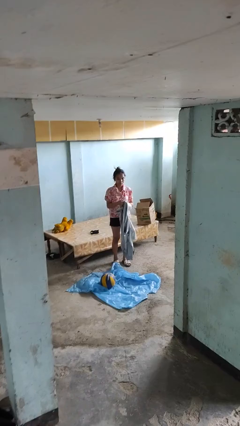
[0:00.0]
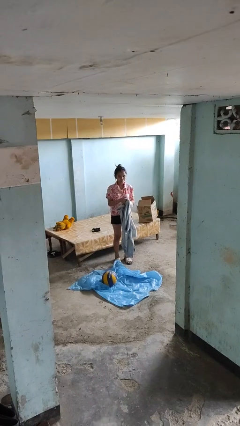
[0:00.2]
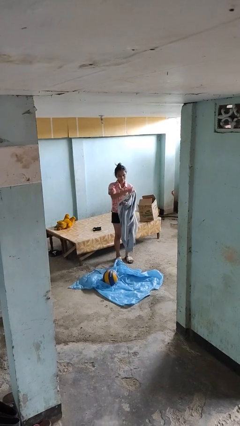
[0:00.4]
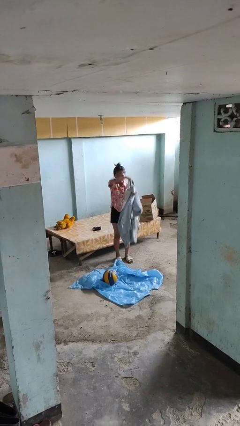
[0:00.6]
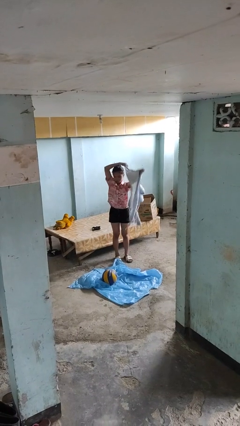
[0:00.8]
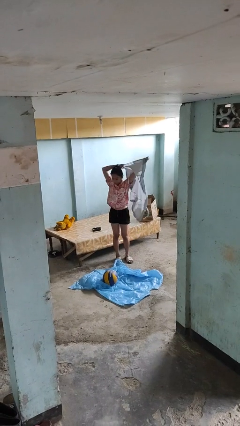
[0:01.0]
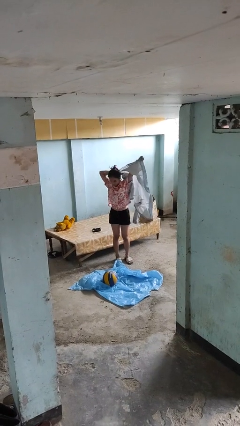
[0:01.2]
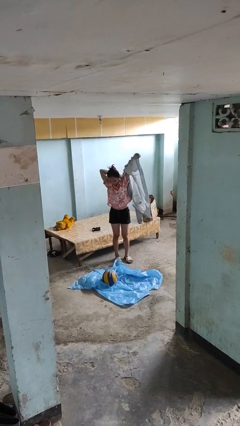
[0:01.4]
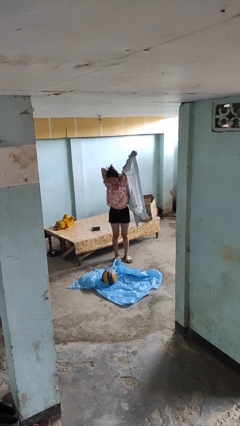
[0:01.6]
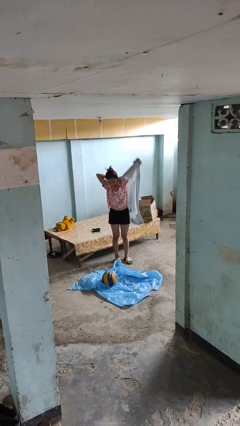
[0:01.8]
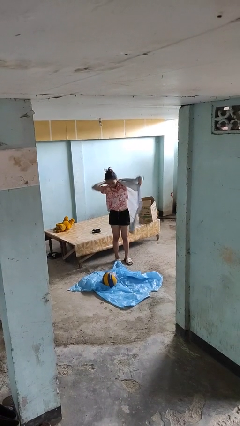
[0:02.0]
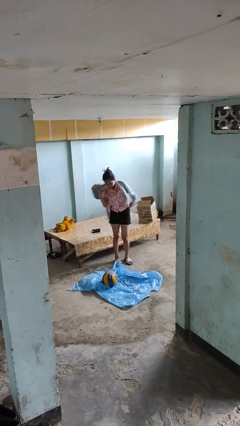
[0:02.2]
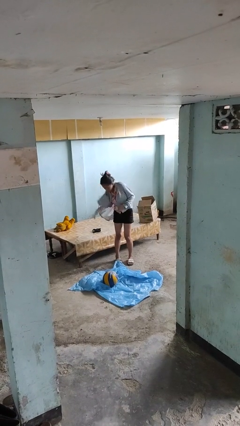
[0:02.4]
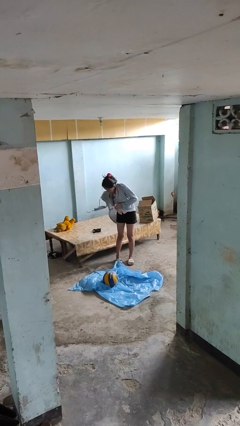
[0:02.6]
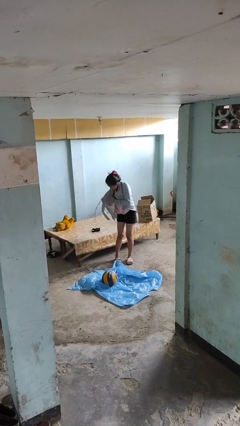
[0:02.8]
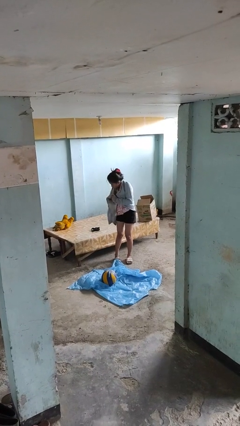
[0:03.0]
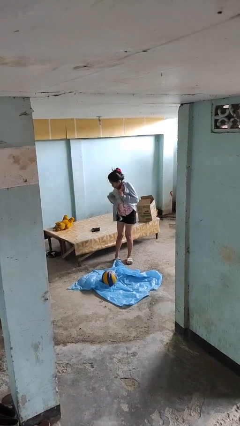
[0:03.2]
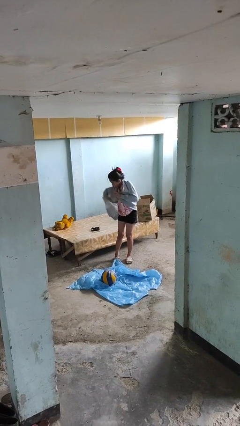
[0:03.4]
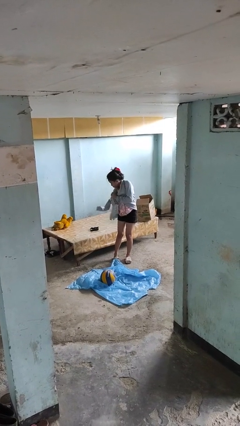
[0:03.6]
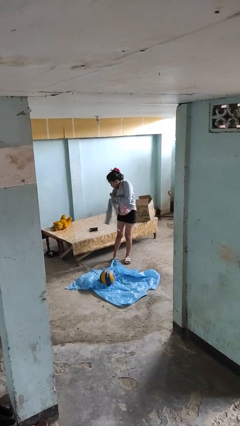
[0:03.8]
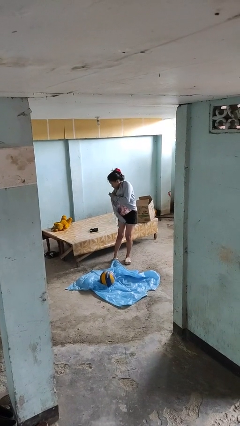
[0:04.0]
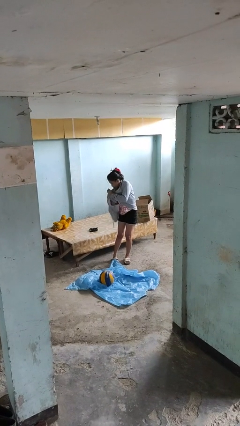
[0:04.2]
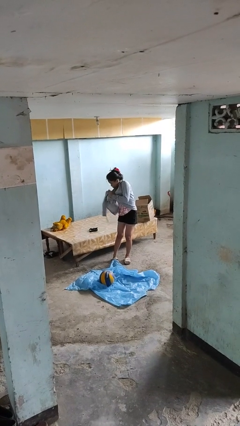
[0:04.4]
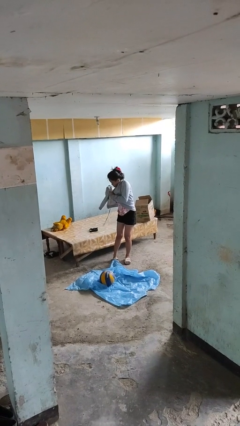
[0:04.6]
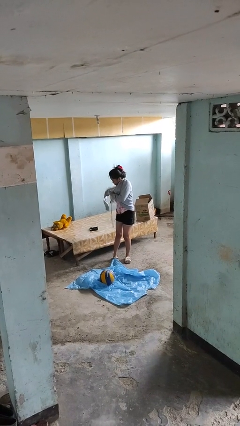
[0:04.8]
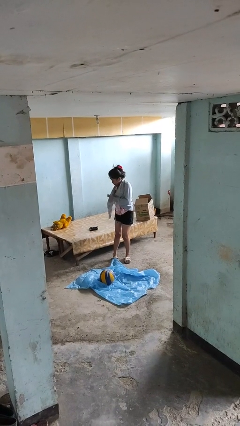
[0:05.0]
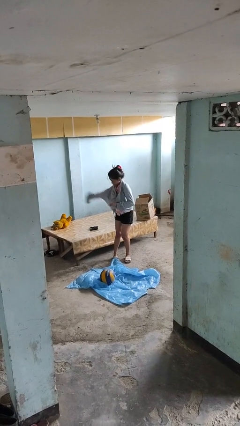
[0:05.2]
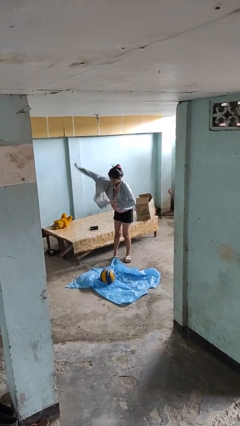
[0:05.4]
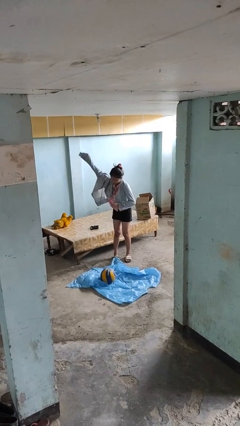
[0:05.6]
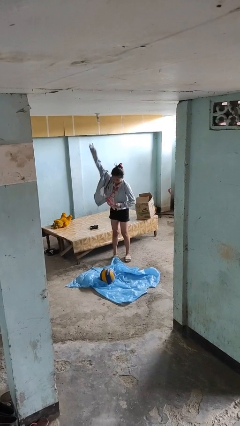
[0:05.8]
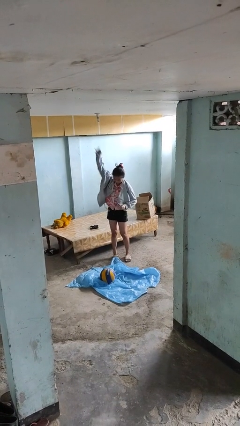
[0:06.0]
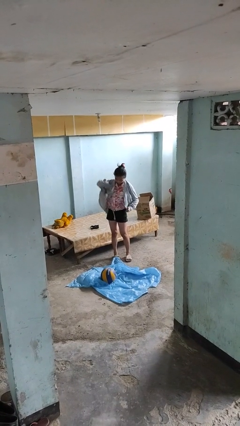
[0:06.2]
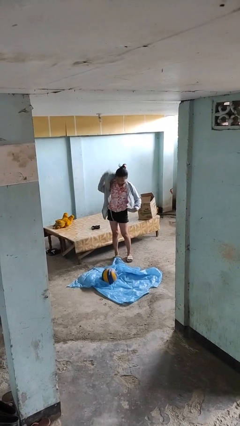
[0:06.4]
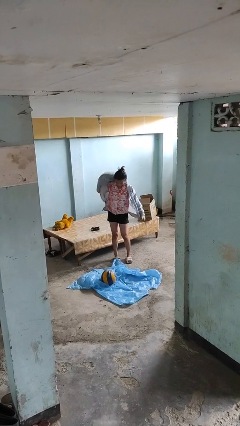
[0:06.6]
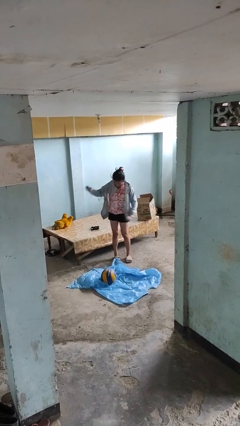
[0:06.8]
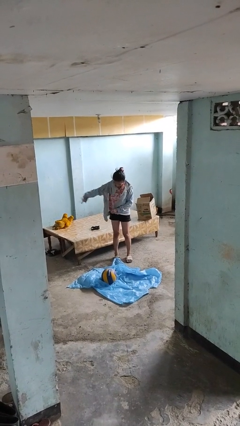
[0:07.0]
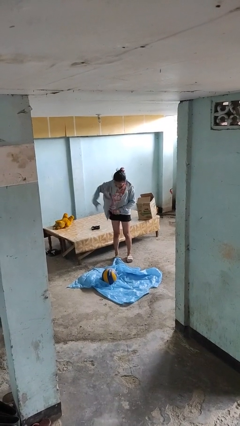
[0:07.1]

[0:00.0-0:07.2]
person puts on jacket

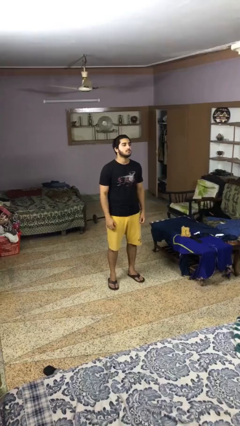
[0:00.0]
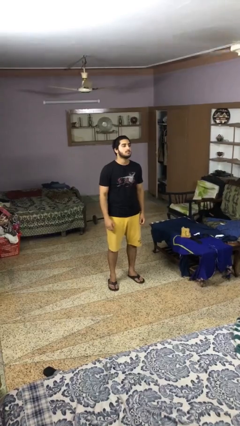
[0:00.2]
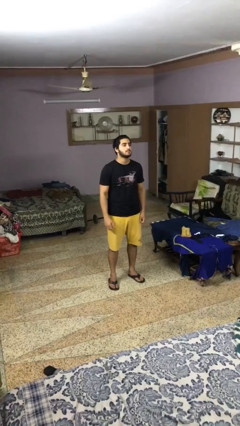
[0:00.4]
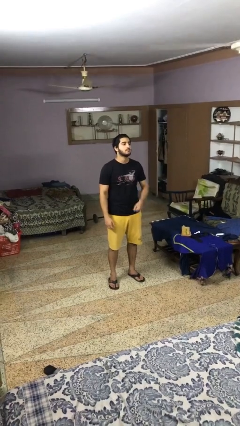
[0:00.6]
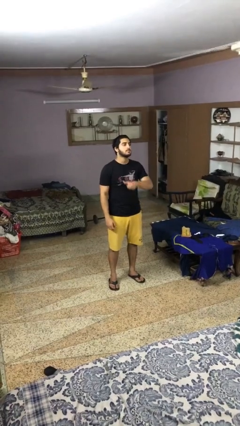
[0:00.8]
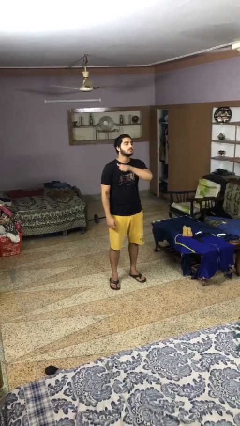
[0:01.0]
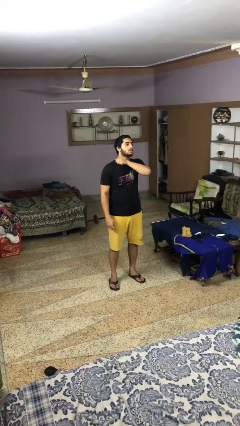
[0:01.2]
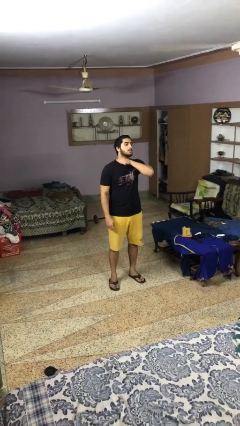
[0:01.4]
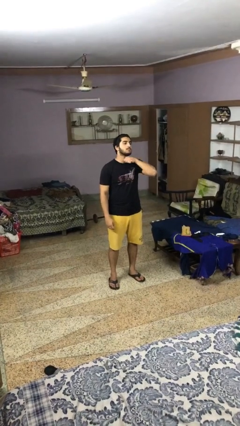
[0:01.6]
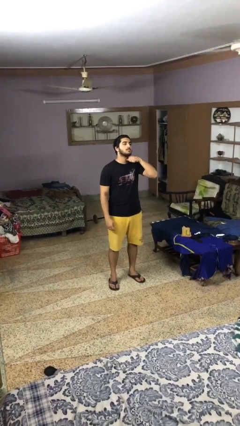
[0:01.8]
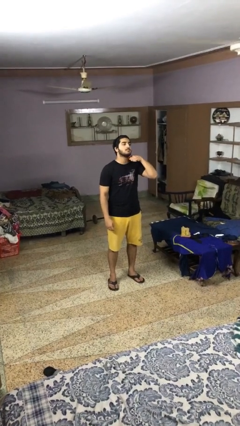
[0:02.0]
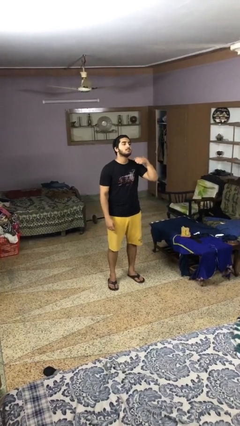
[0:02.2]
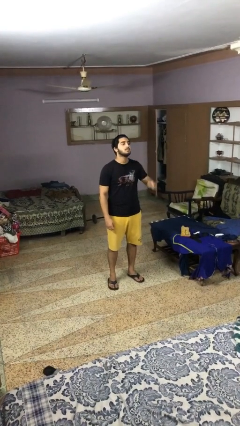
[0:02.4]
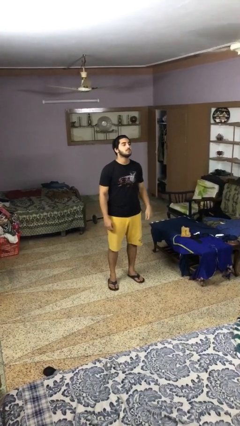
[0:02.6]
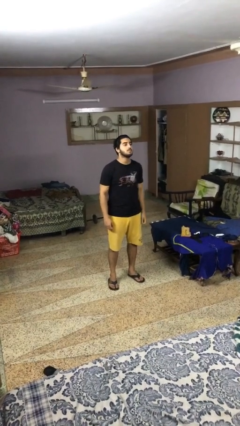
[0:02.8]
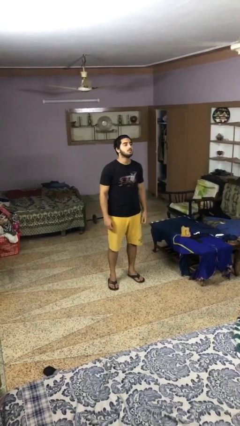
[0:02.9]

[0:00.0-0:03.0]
person gestures cut

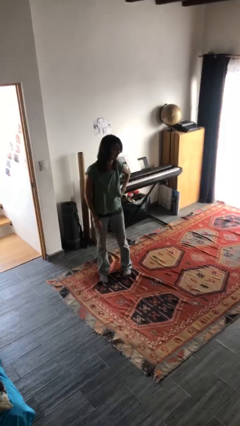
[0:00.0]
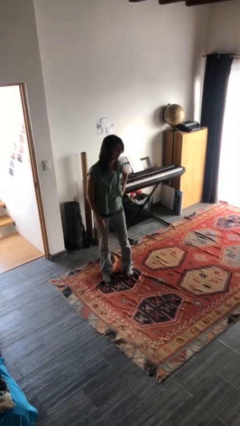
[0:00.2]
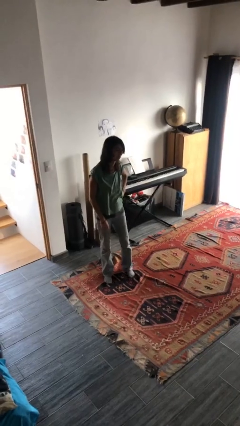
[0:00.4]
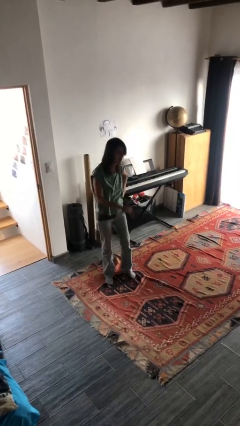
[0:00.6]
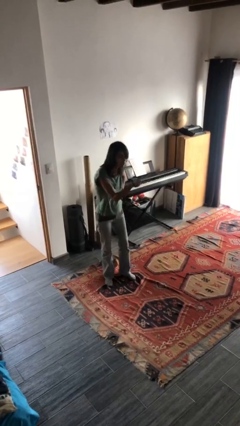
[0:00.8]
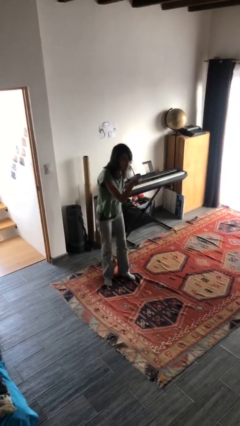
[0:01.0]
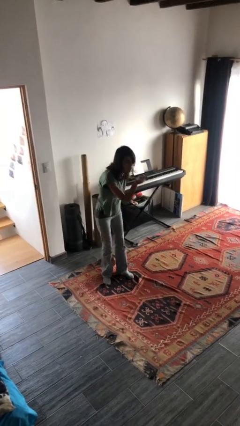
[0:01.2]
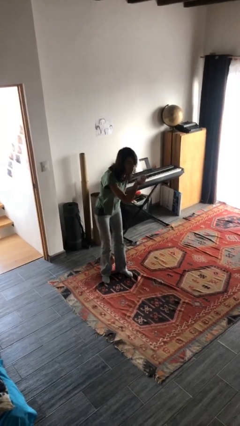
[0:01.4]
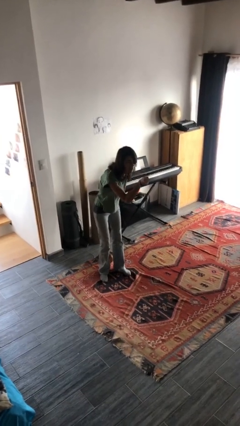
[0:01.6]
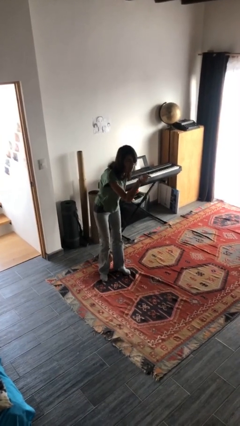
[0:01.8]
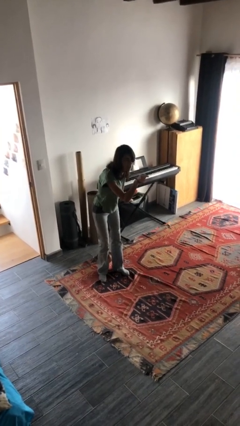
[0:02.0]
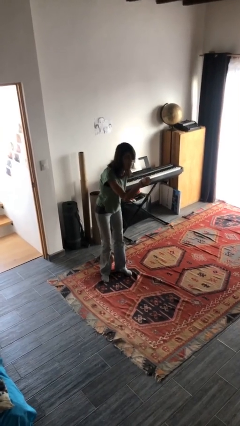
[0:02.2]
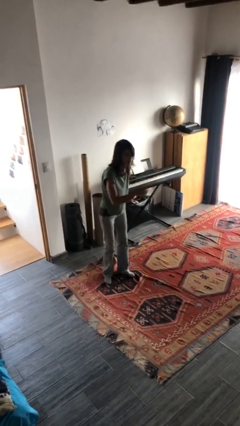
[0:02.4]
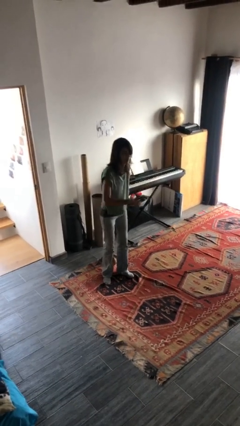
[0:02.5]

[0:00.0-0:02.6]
person points at person

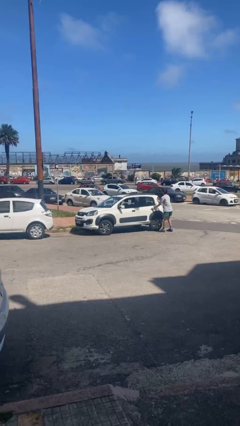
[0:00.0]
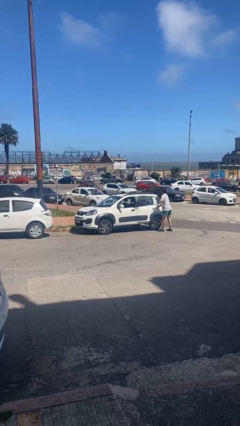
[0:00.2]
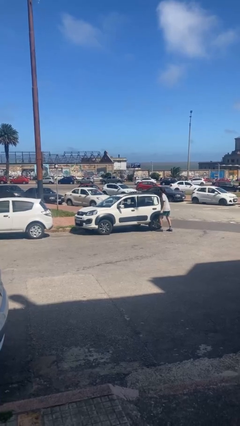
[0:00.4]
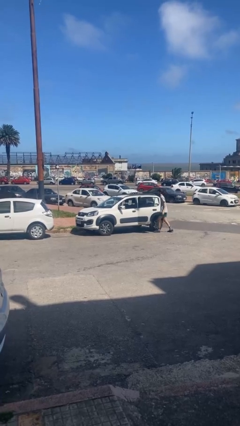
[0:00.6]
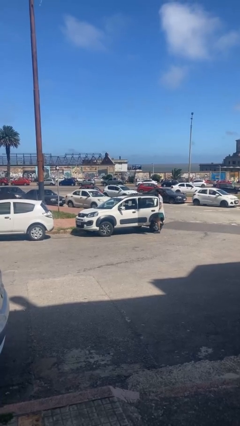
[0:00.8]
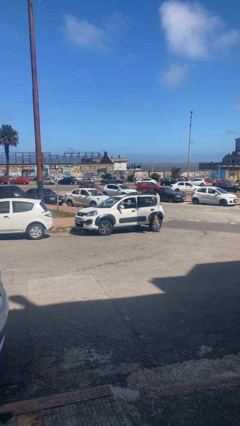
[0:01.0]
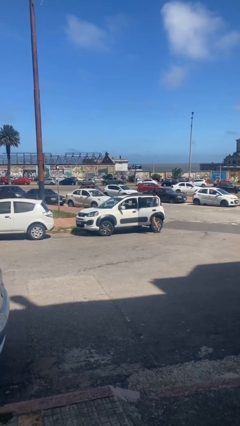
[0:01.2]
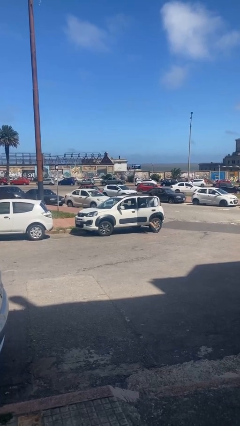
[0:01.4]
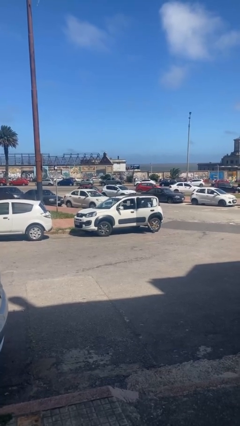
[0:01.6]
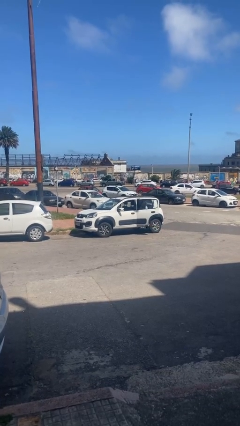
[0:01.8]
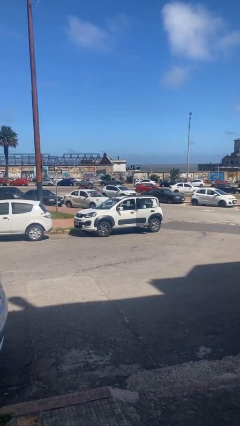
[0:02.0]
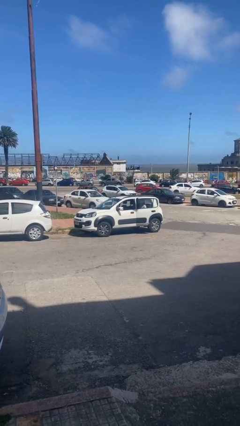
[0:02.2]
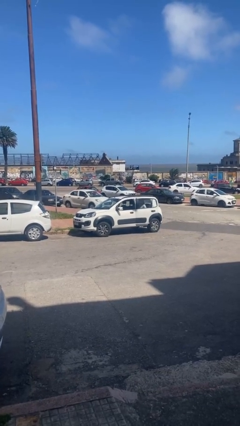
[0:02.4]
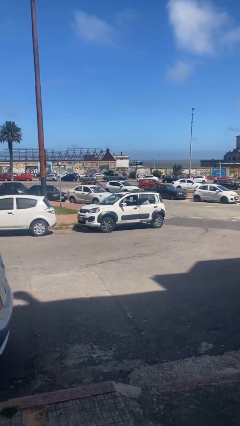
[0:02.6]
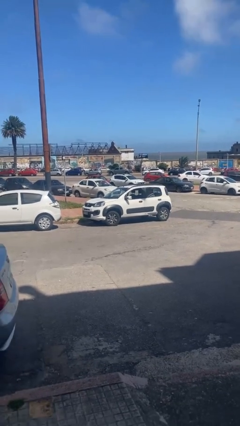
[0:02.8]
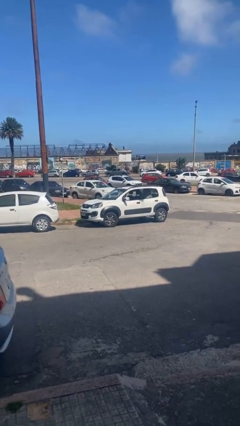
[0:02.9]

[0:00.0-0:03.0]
car picks up person

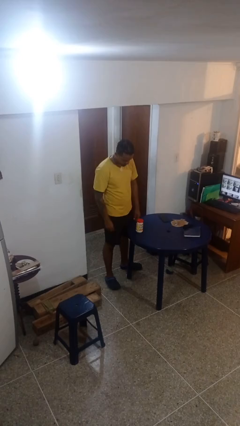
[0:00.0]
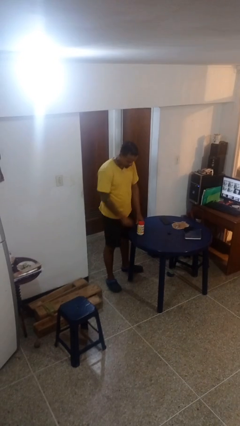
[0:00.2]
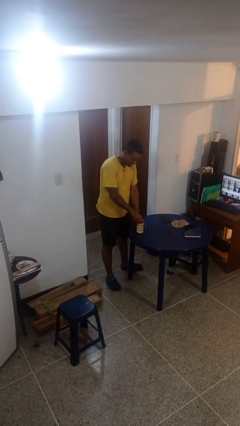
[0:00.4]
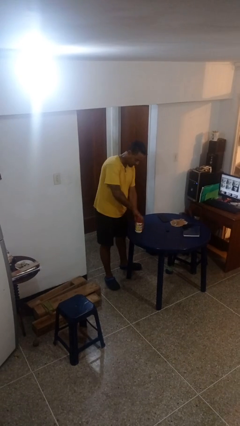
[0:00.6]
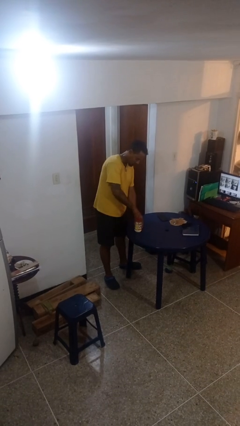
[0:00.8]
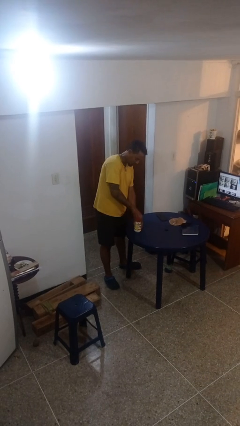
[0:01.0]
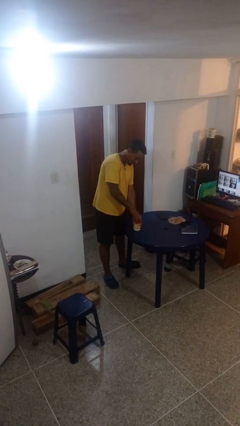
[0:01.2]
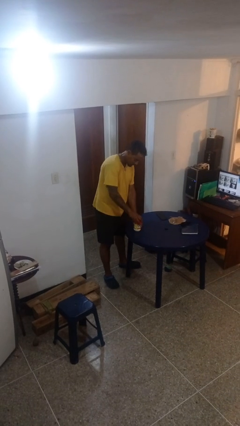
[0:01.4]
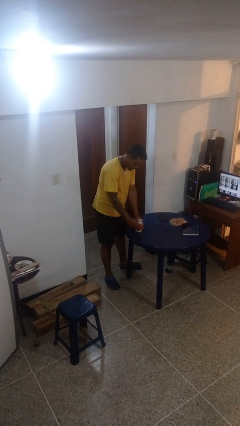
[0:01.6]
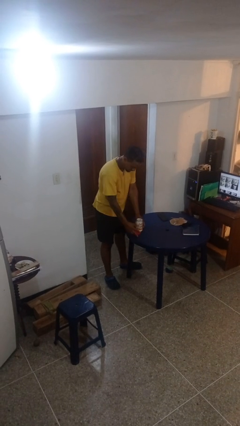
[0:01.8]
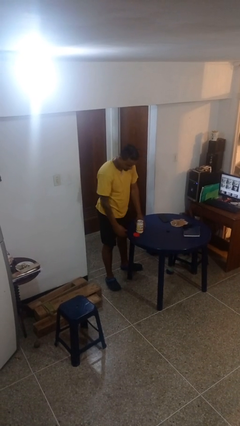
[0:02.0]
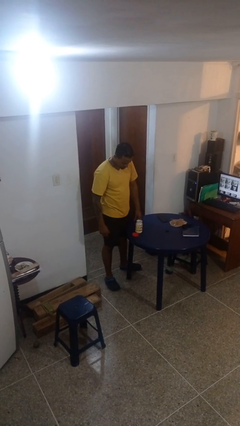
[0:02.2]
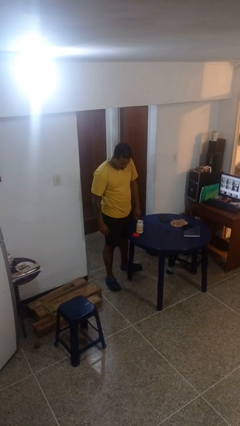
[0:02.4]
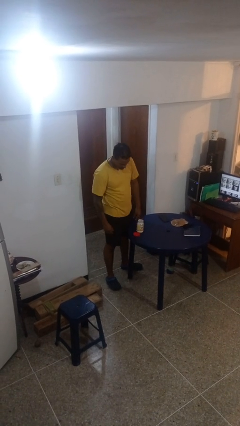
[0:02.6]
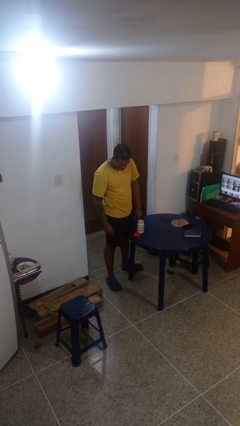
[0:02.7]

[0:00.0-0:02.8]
person opens jar
